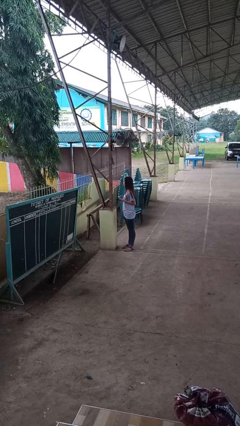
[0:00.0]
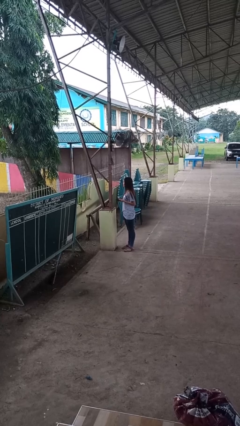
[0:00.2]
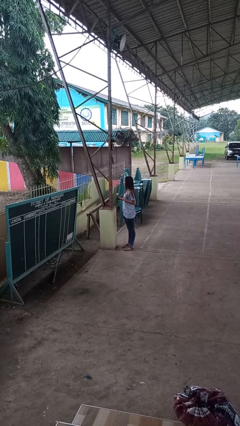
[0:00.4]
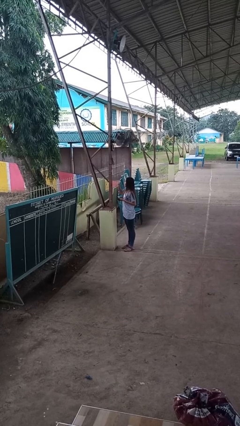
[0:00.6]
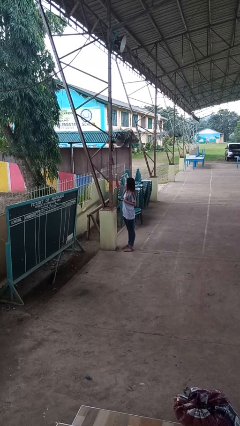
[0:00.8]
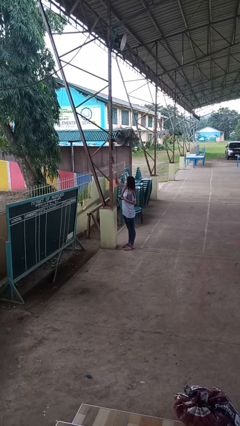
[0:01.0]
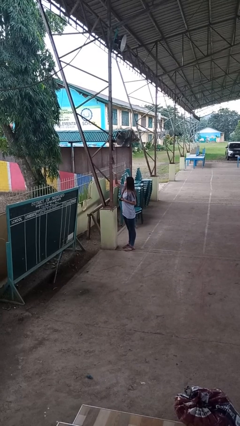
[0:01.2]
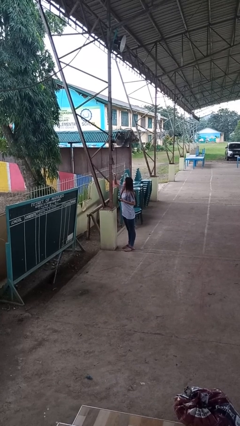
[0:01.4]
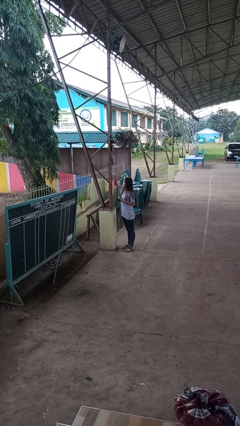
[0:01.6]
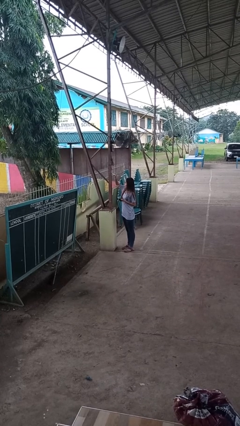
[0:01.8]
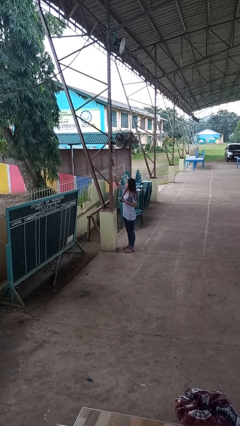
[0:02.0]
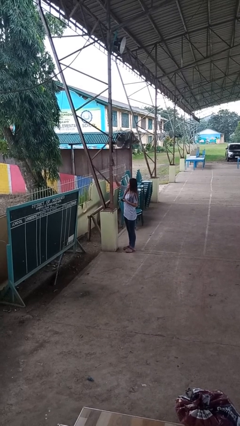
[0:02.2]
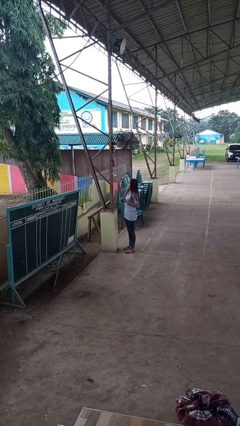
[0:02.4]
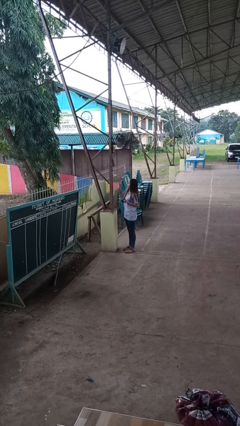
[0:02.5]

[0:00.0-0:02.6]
person plugs into electrical socket

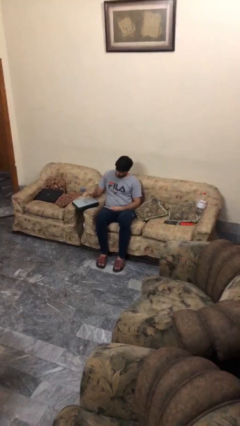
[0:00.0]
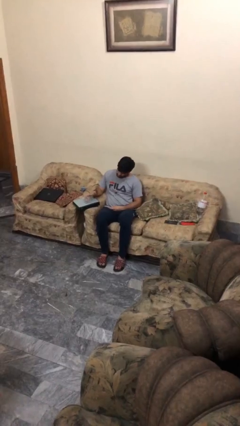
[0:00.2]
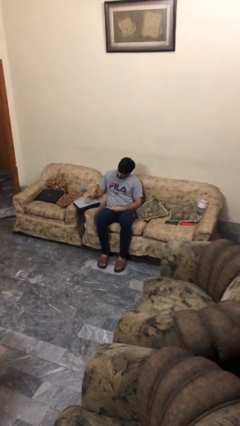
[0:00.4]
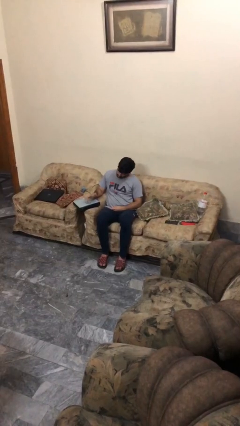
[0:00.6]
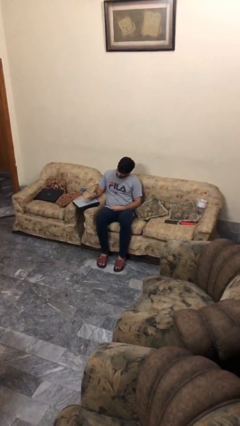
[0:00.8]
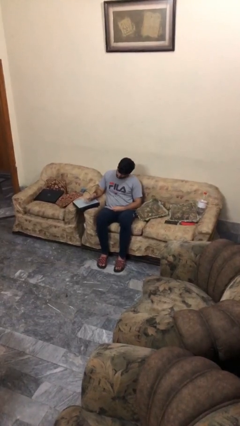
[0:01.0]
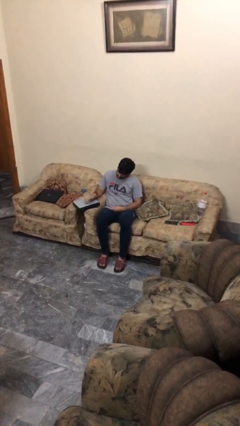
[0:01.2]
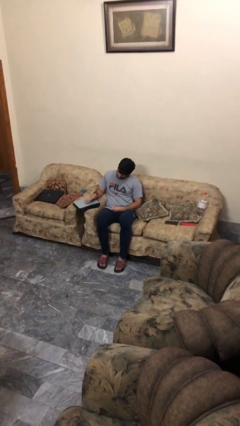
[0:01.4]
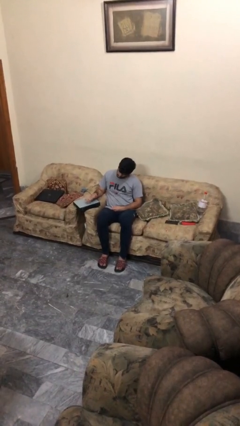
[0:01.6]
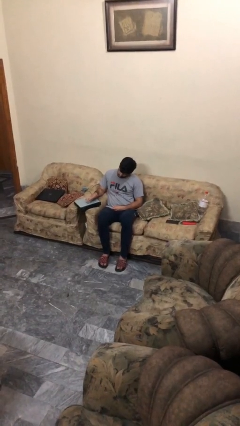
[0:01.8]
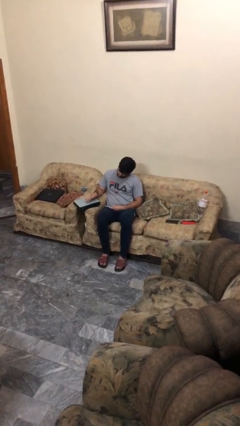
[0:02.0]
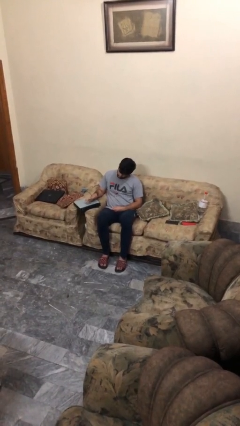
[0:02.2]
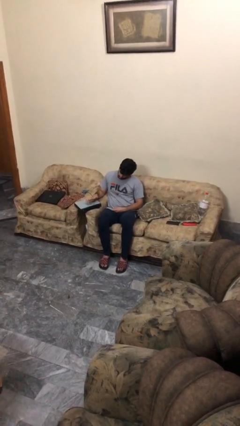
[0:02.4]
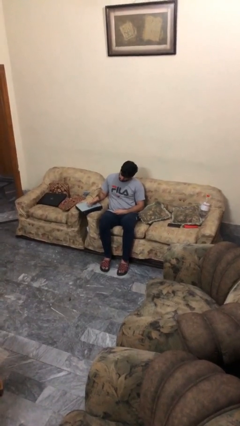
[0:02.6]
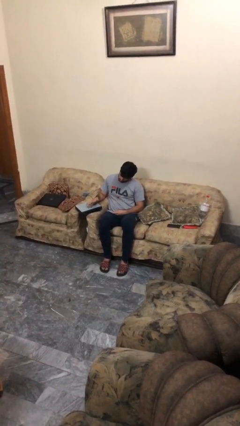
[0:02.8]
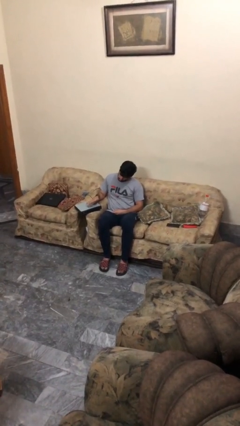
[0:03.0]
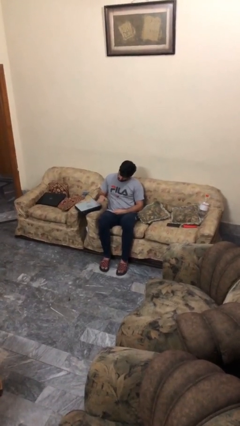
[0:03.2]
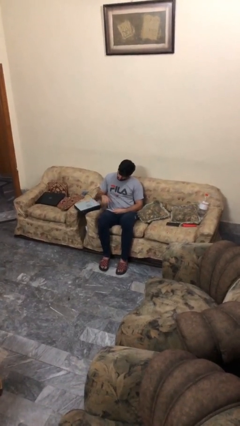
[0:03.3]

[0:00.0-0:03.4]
person taps object with finger

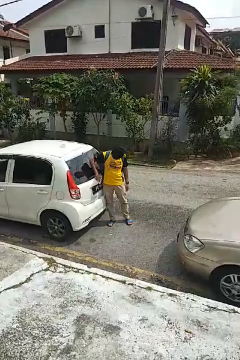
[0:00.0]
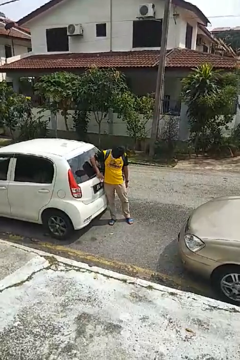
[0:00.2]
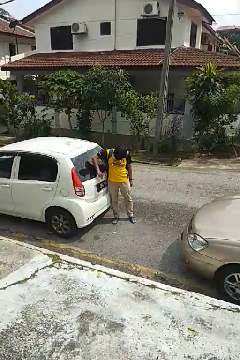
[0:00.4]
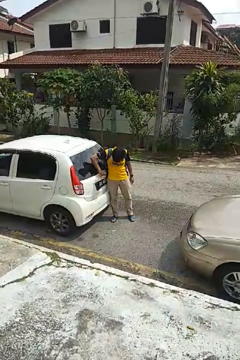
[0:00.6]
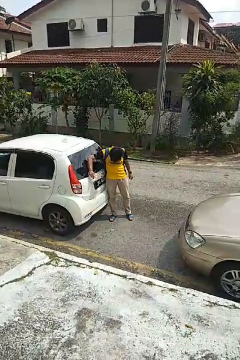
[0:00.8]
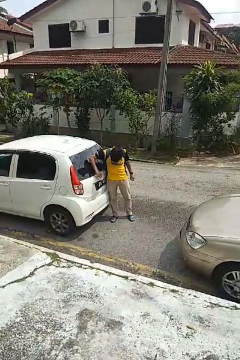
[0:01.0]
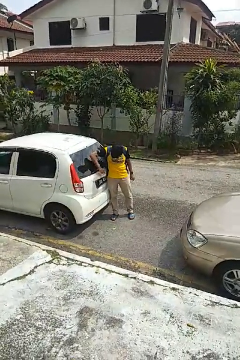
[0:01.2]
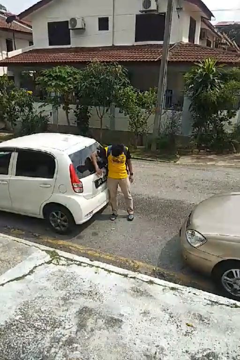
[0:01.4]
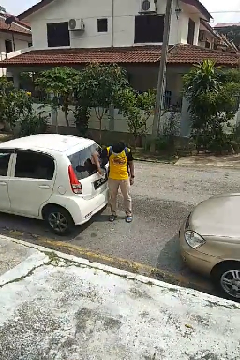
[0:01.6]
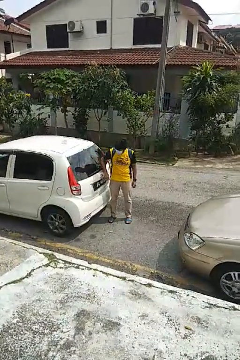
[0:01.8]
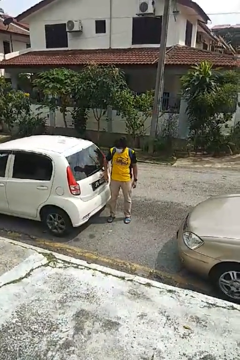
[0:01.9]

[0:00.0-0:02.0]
person polishes car with rag

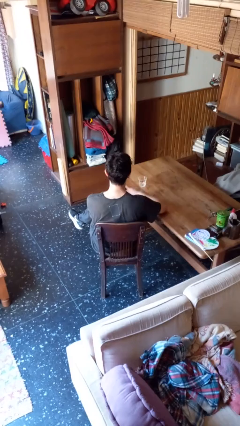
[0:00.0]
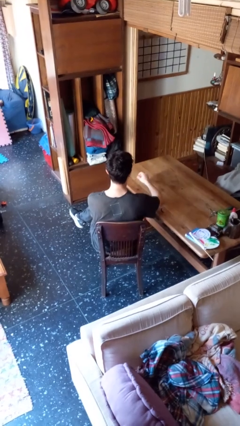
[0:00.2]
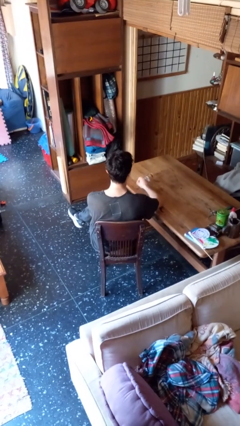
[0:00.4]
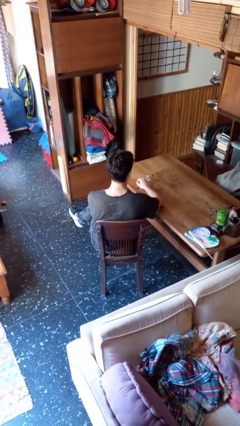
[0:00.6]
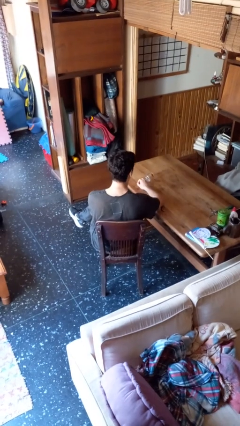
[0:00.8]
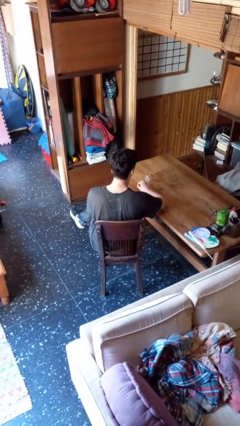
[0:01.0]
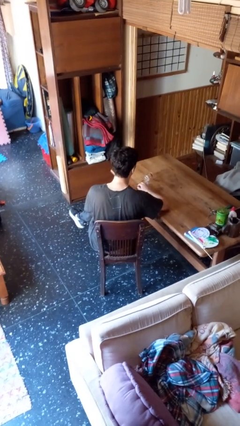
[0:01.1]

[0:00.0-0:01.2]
person knocks over glass

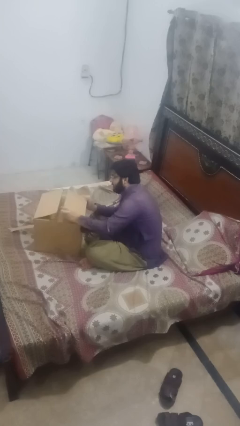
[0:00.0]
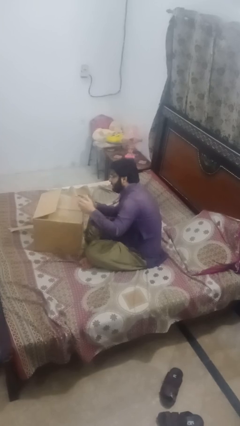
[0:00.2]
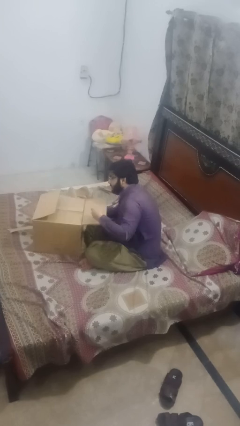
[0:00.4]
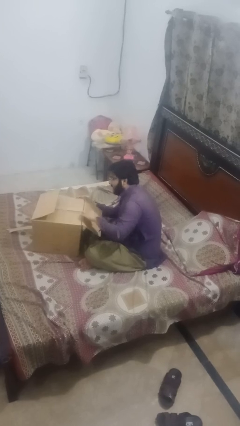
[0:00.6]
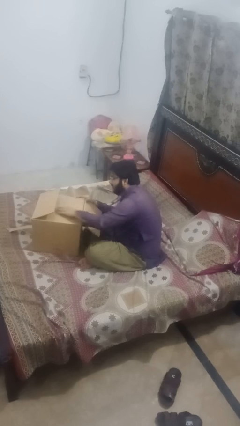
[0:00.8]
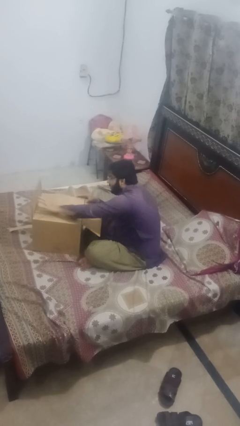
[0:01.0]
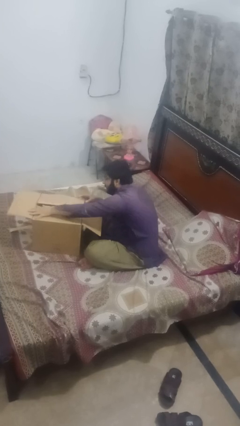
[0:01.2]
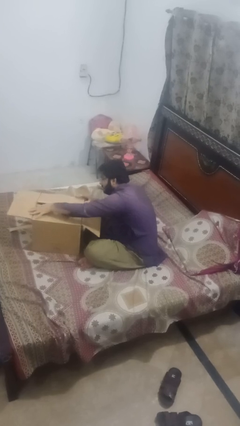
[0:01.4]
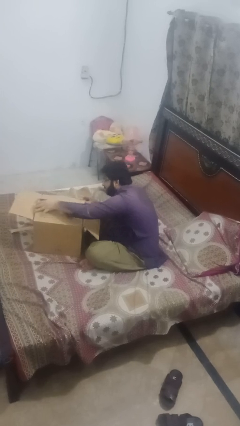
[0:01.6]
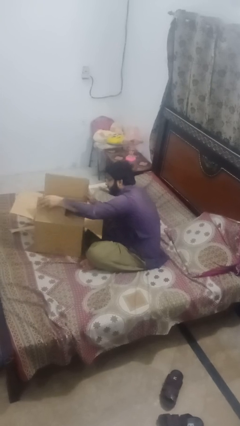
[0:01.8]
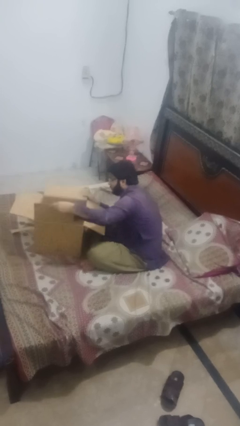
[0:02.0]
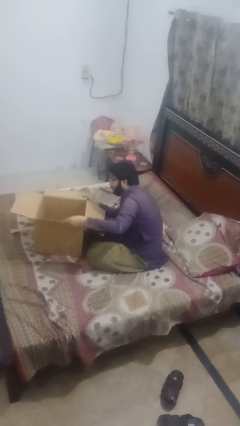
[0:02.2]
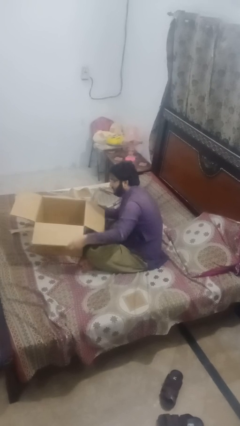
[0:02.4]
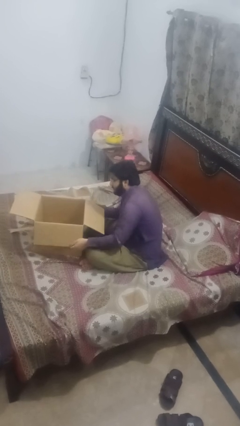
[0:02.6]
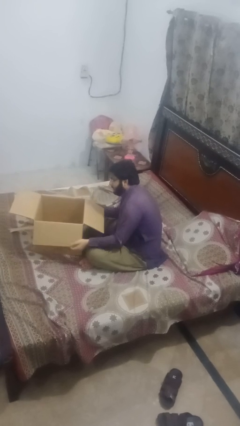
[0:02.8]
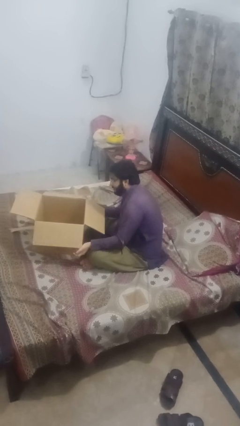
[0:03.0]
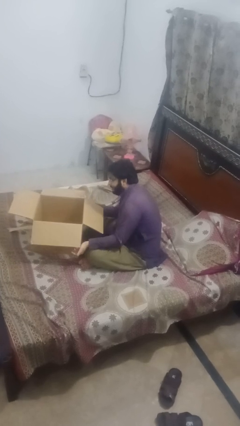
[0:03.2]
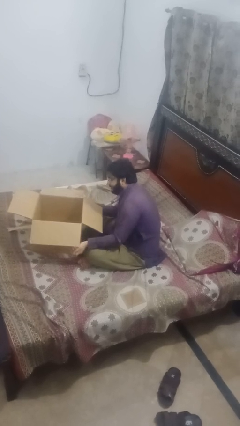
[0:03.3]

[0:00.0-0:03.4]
person opens box

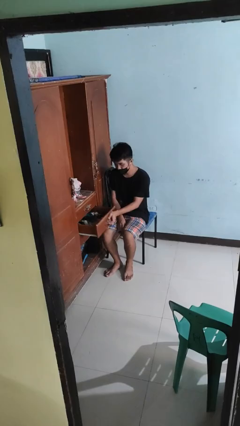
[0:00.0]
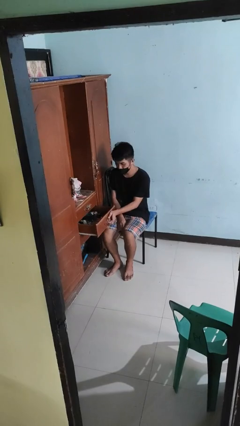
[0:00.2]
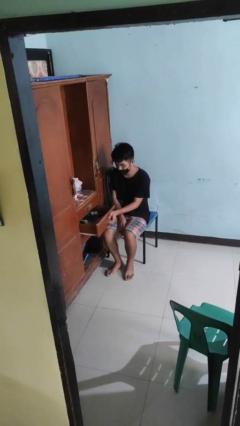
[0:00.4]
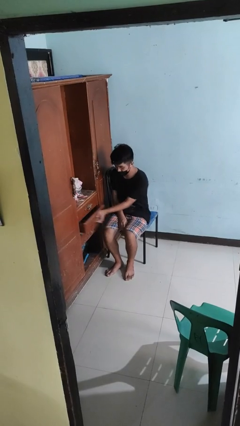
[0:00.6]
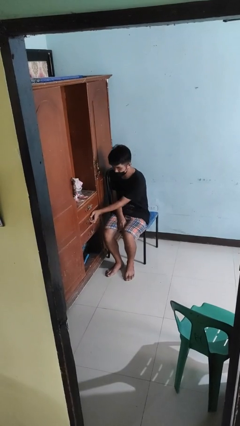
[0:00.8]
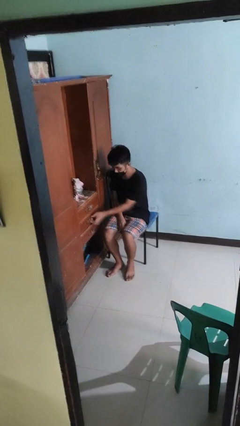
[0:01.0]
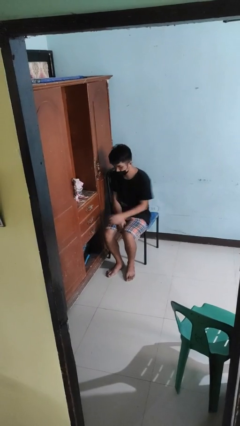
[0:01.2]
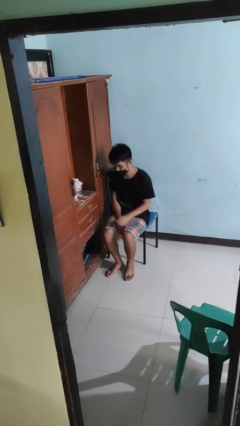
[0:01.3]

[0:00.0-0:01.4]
person closes dresser drawer

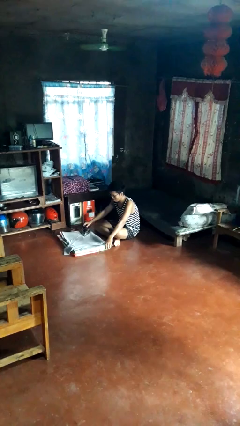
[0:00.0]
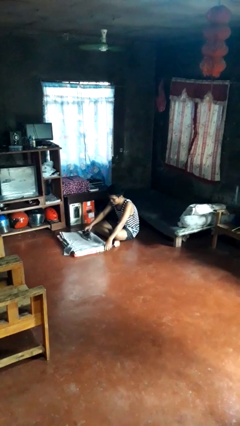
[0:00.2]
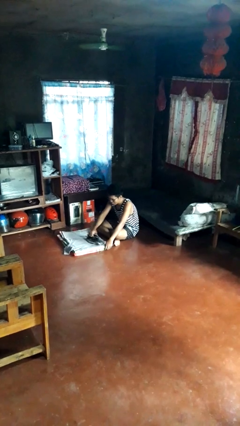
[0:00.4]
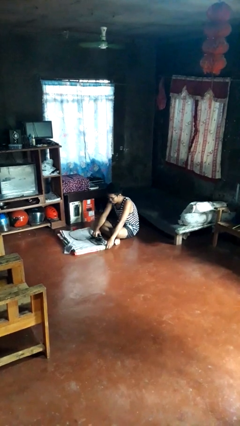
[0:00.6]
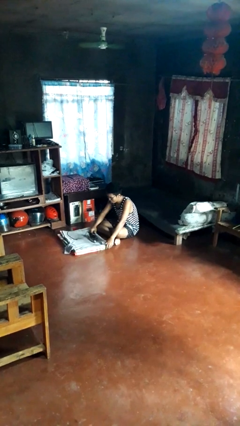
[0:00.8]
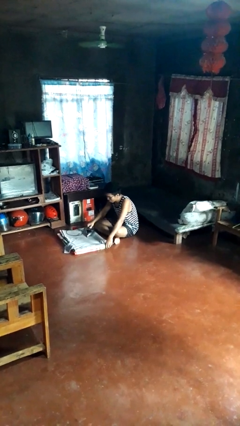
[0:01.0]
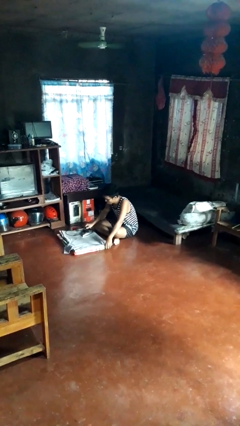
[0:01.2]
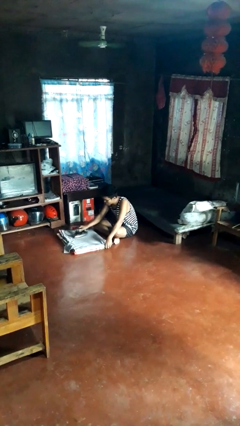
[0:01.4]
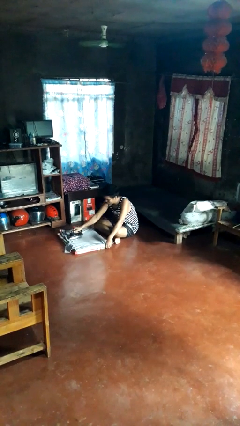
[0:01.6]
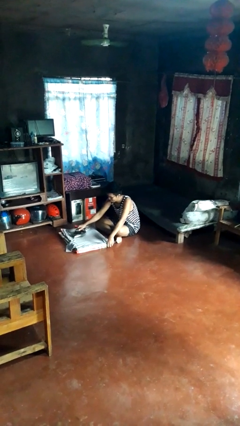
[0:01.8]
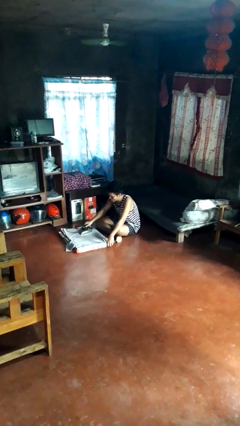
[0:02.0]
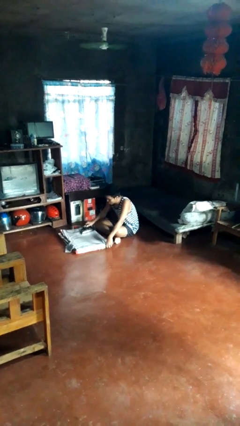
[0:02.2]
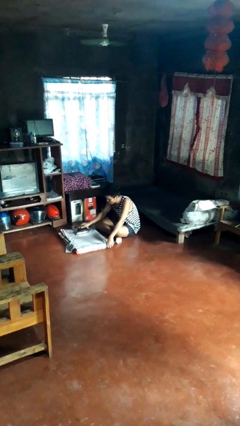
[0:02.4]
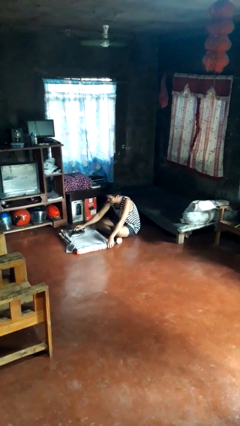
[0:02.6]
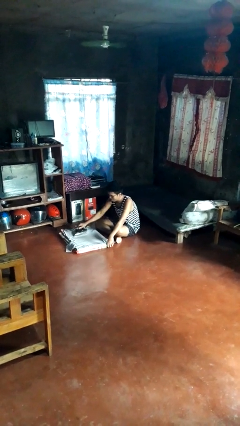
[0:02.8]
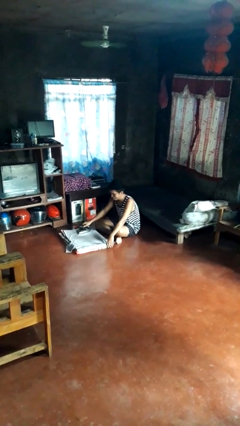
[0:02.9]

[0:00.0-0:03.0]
person irons clothes

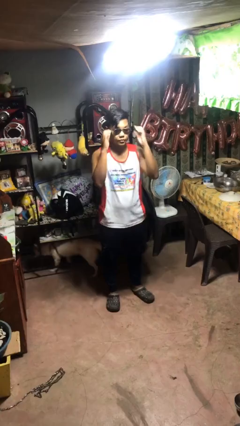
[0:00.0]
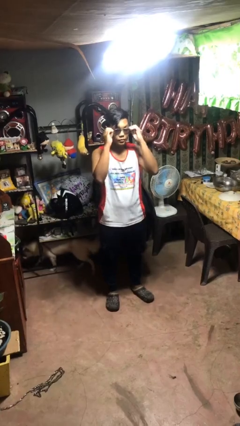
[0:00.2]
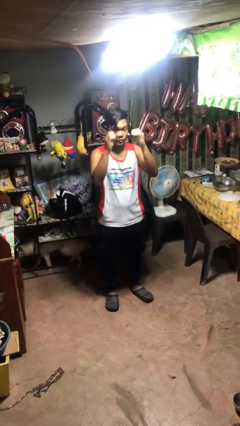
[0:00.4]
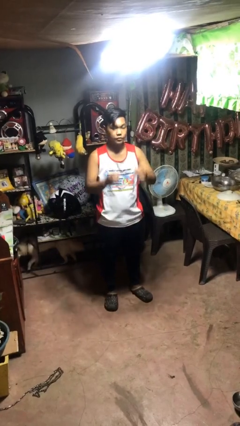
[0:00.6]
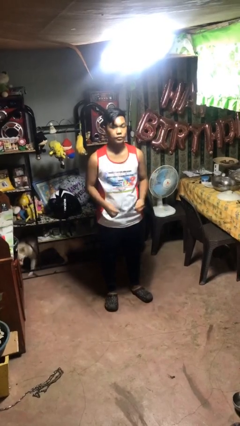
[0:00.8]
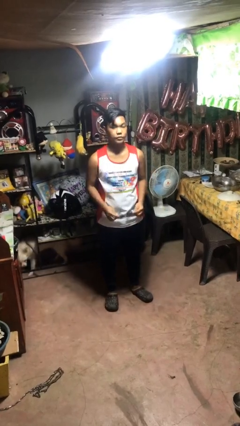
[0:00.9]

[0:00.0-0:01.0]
person takes off sunglasses
